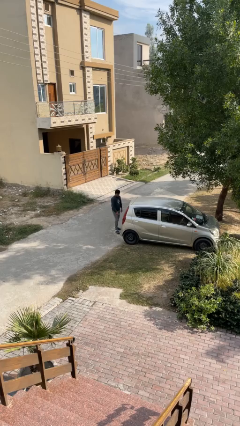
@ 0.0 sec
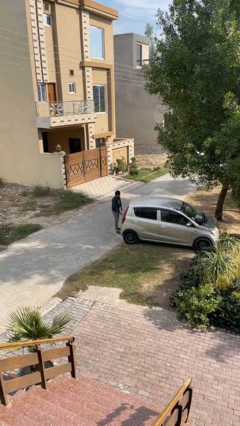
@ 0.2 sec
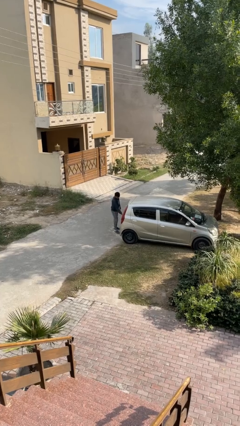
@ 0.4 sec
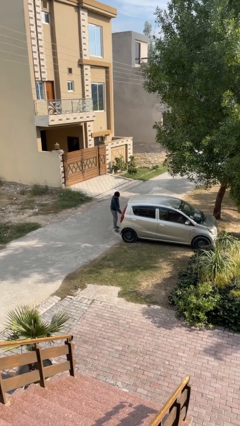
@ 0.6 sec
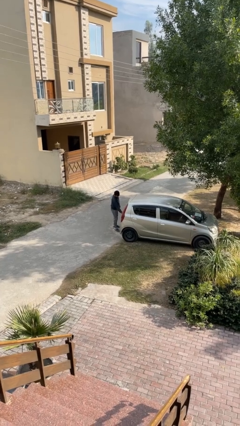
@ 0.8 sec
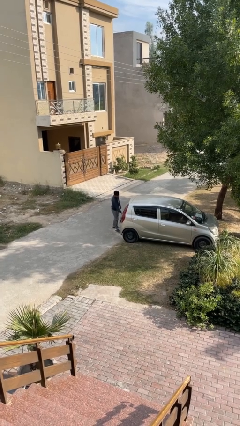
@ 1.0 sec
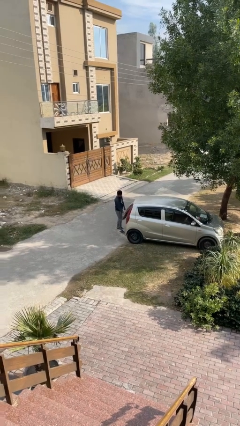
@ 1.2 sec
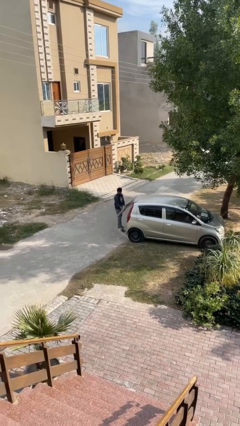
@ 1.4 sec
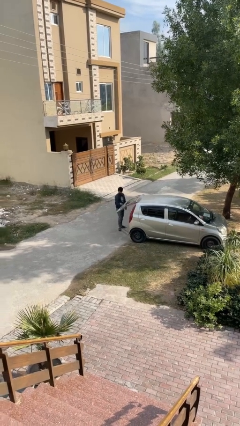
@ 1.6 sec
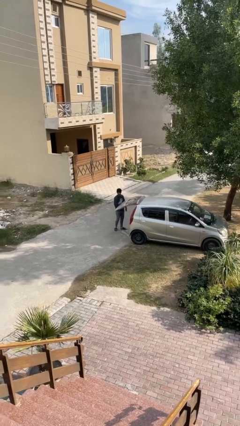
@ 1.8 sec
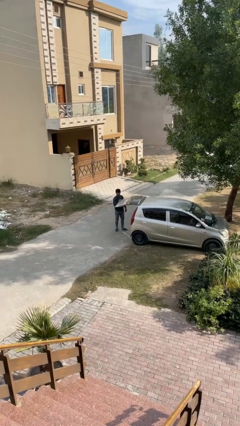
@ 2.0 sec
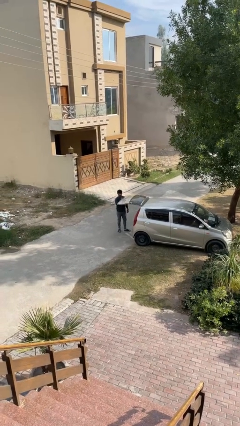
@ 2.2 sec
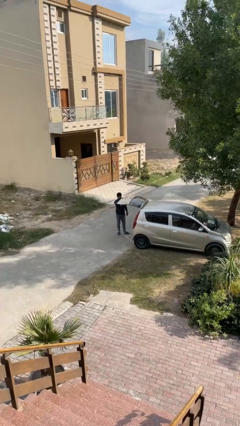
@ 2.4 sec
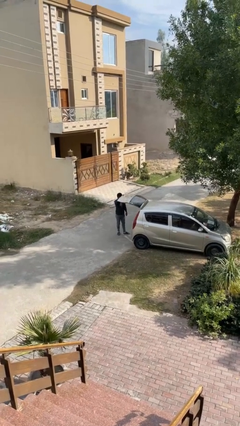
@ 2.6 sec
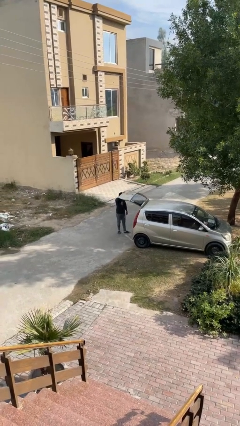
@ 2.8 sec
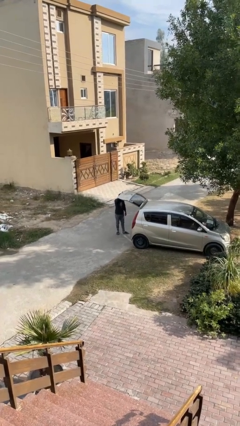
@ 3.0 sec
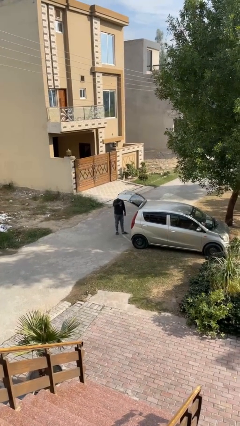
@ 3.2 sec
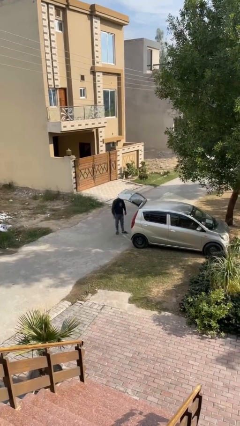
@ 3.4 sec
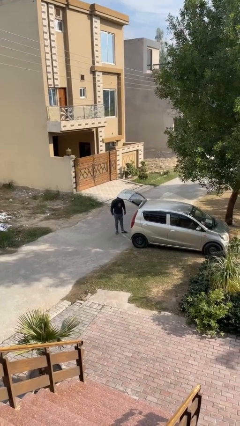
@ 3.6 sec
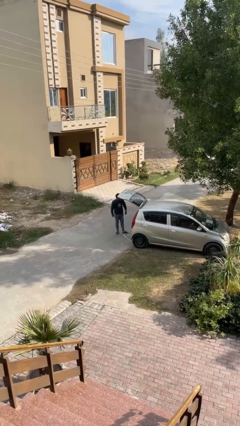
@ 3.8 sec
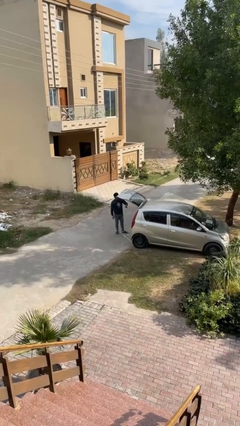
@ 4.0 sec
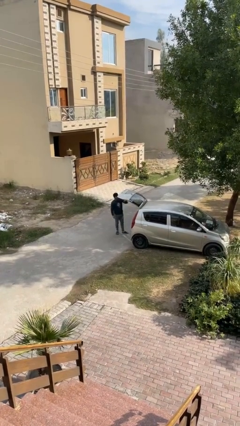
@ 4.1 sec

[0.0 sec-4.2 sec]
person opens car trunk

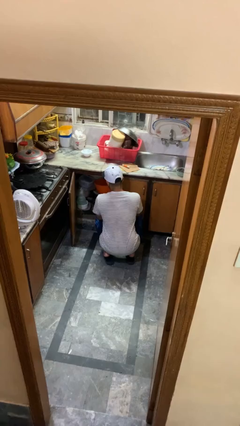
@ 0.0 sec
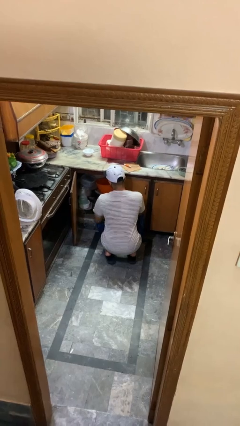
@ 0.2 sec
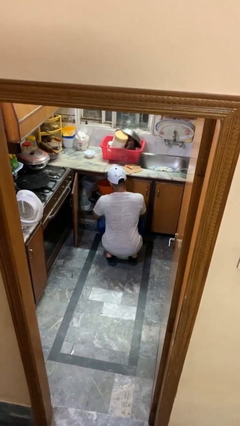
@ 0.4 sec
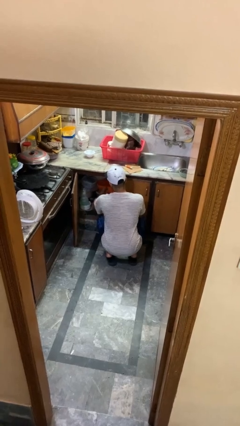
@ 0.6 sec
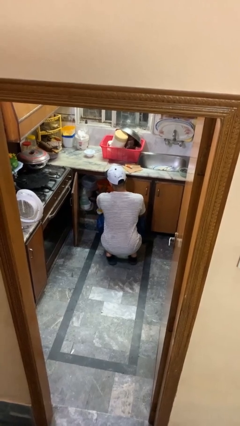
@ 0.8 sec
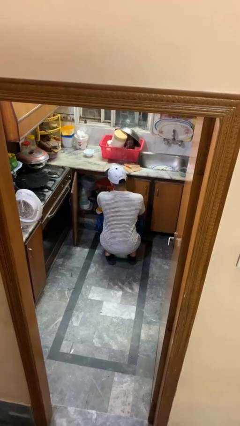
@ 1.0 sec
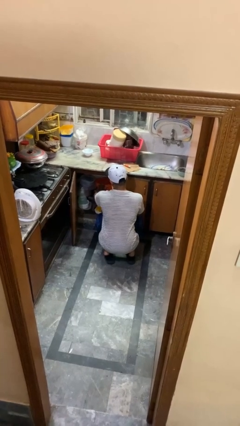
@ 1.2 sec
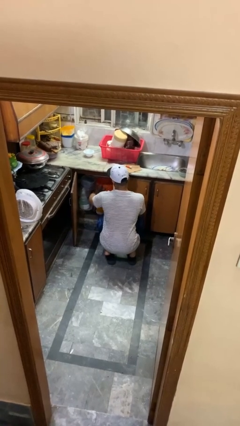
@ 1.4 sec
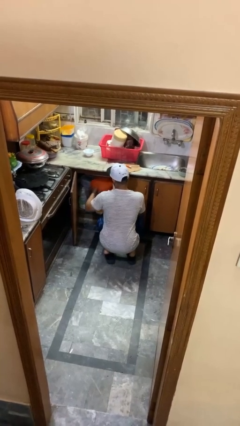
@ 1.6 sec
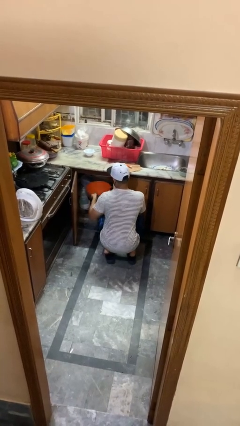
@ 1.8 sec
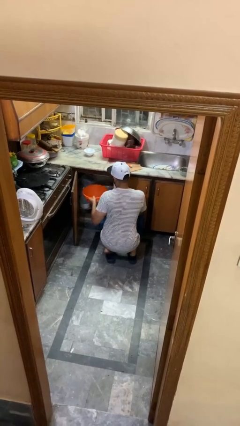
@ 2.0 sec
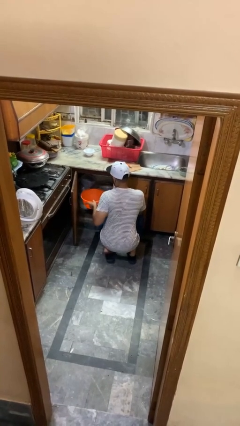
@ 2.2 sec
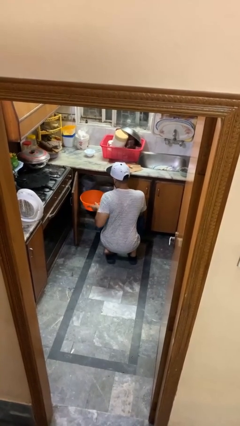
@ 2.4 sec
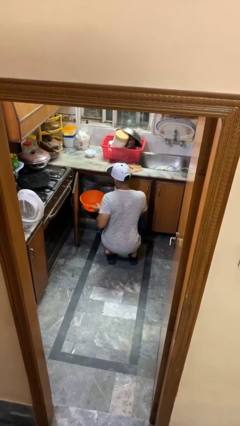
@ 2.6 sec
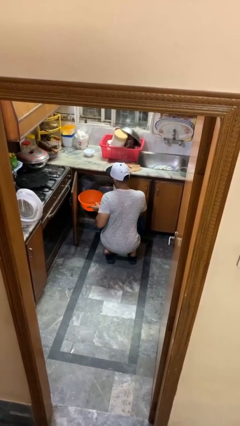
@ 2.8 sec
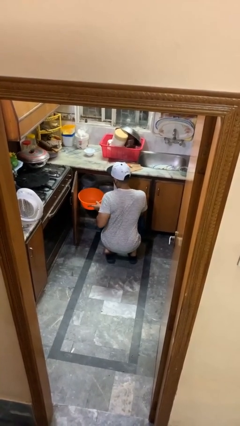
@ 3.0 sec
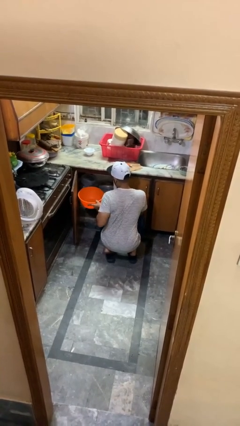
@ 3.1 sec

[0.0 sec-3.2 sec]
person takes object from kitchen drawer

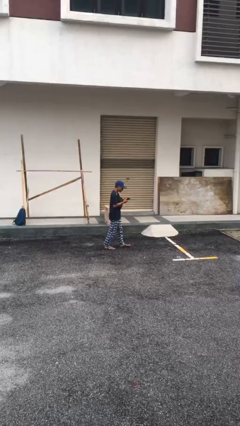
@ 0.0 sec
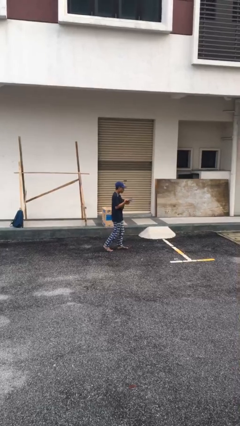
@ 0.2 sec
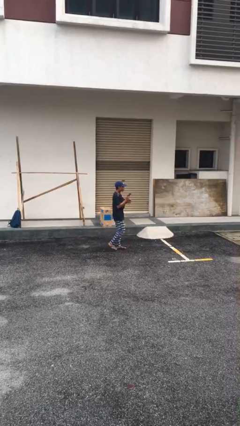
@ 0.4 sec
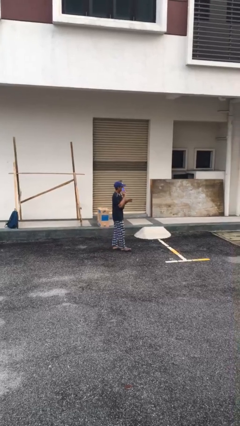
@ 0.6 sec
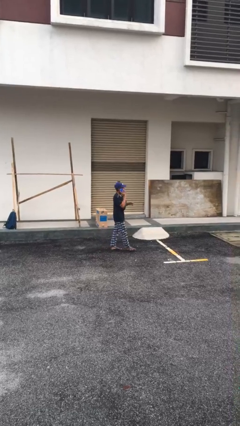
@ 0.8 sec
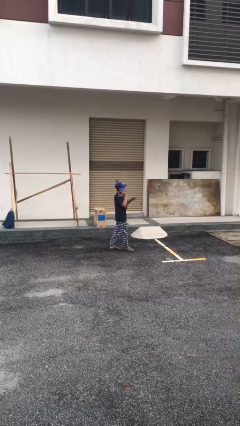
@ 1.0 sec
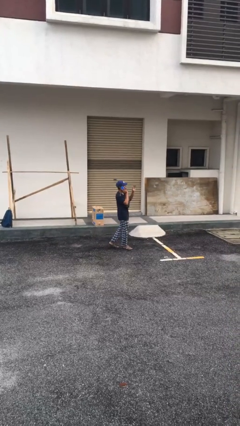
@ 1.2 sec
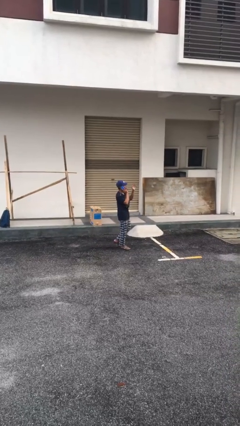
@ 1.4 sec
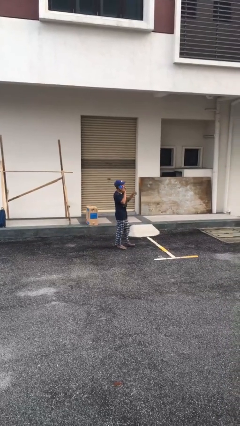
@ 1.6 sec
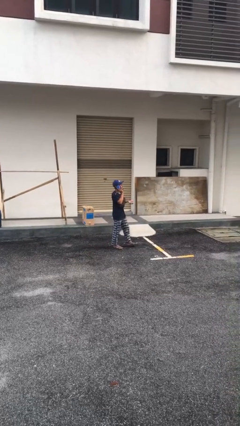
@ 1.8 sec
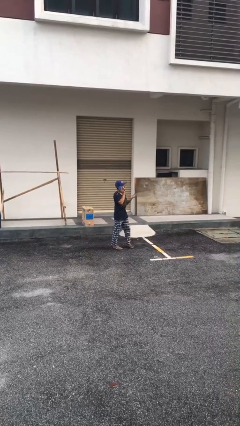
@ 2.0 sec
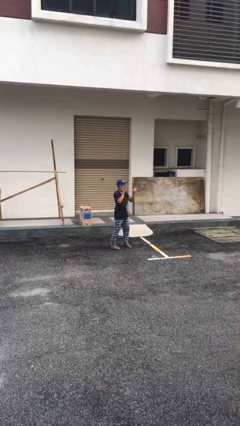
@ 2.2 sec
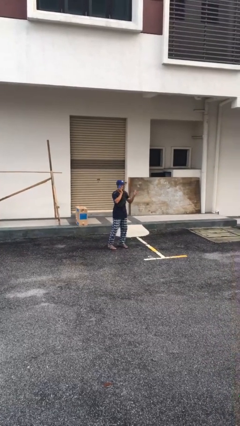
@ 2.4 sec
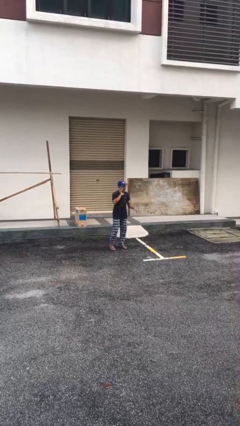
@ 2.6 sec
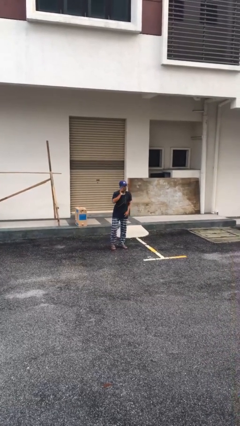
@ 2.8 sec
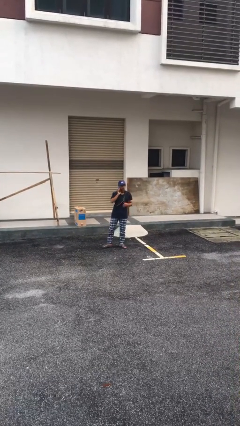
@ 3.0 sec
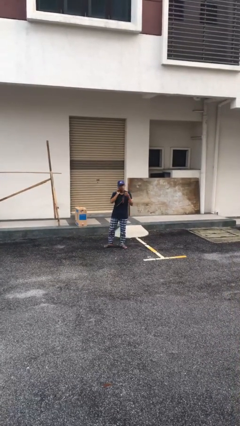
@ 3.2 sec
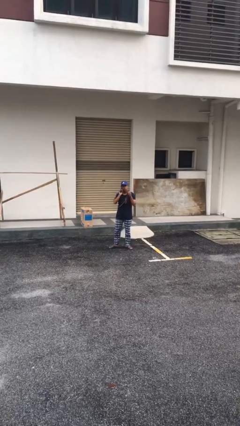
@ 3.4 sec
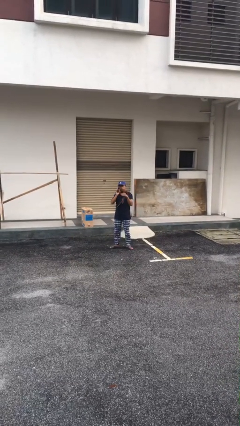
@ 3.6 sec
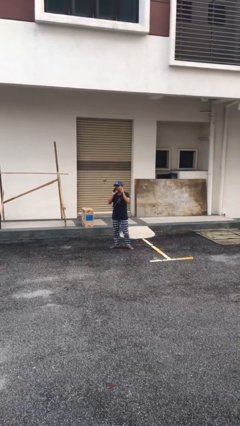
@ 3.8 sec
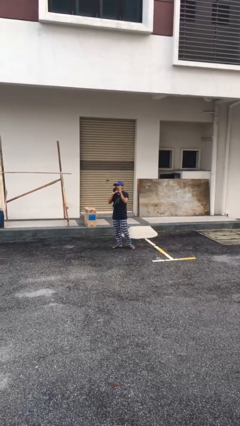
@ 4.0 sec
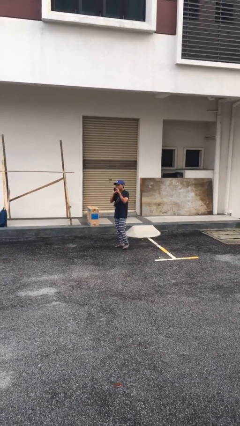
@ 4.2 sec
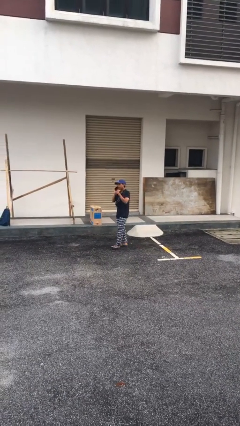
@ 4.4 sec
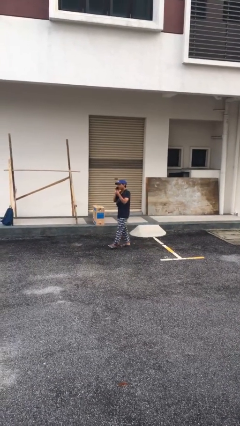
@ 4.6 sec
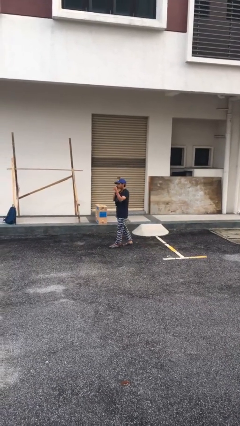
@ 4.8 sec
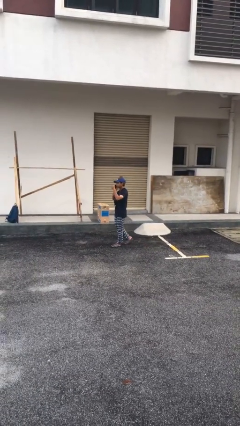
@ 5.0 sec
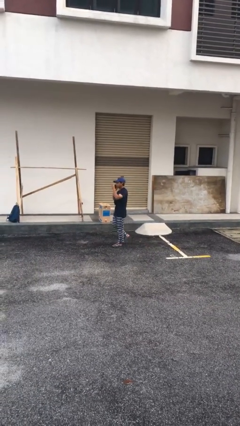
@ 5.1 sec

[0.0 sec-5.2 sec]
person talks on phone

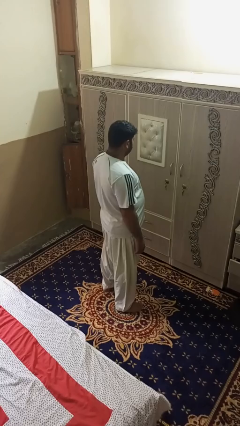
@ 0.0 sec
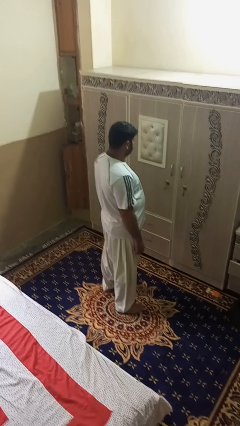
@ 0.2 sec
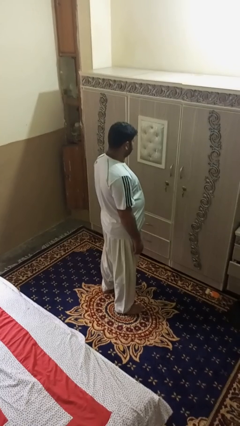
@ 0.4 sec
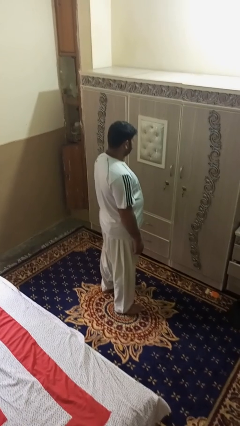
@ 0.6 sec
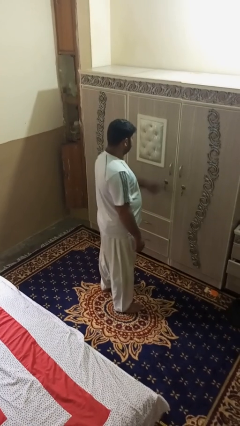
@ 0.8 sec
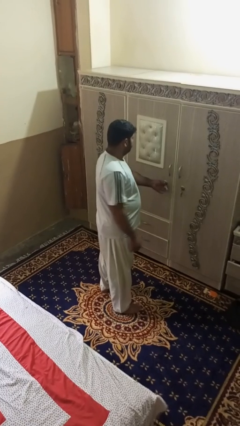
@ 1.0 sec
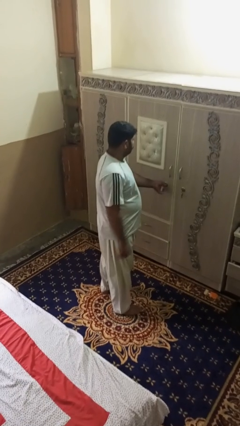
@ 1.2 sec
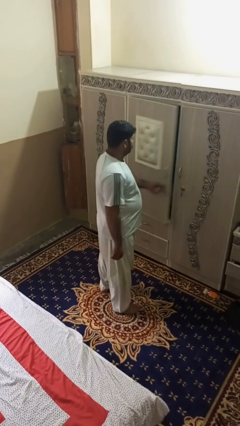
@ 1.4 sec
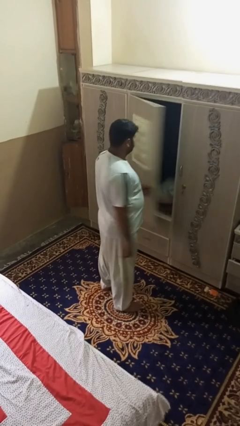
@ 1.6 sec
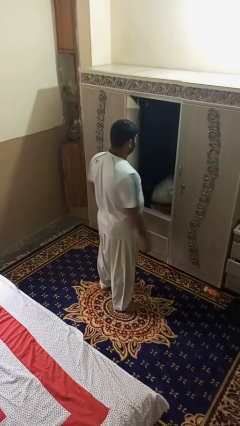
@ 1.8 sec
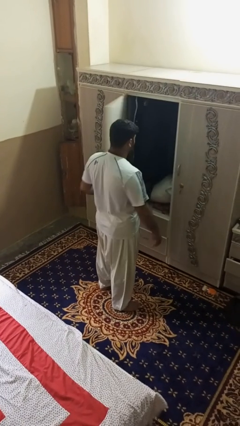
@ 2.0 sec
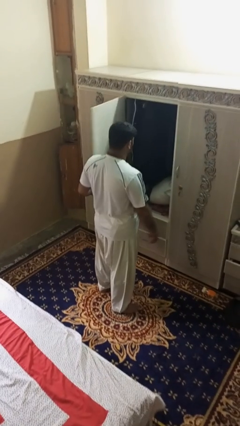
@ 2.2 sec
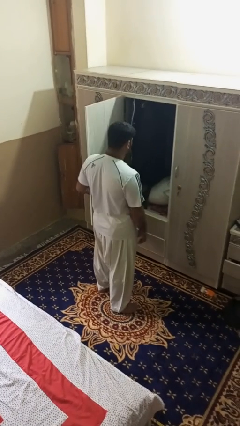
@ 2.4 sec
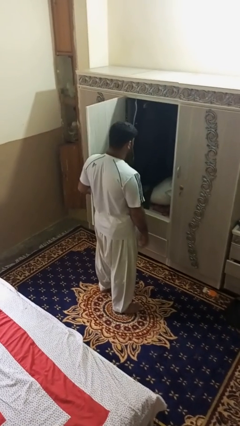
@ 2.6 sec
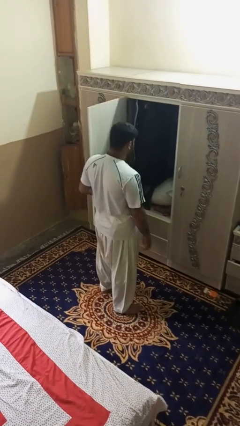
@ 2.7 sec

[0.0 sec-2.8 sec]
person opens dresser drawer

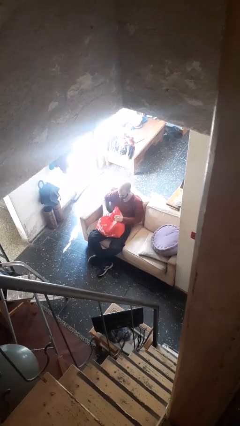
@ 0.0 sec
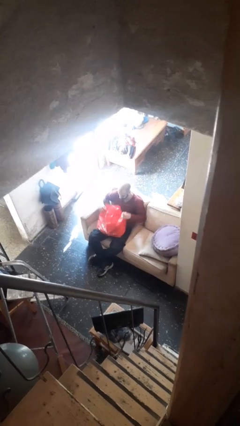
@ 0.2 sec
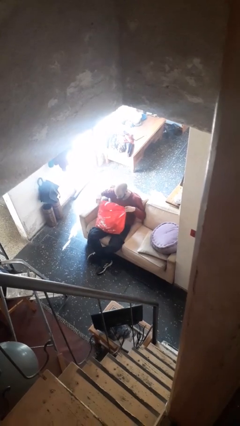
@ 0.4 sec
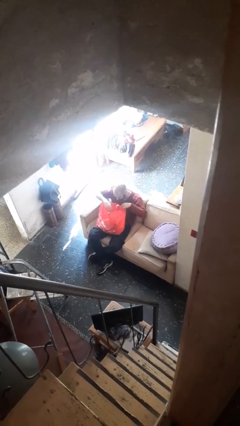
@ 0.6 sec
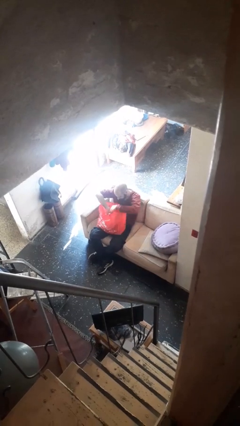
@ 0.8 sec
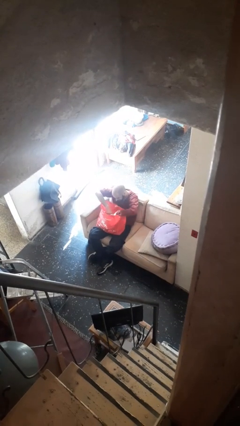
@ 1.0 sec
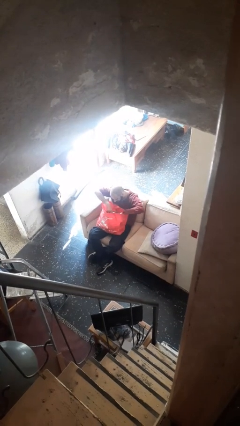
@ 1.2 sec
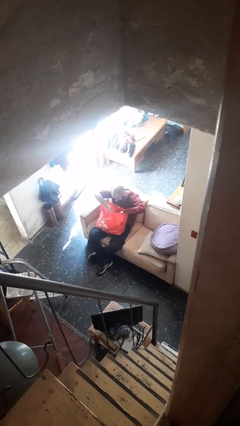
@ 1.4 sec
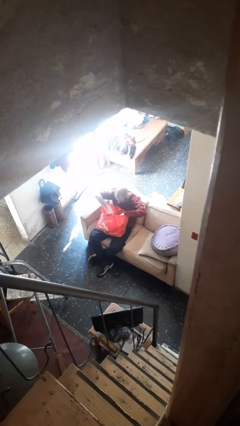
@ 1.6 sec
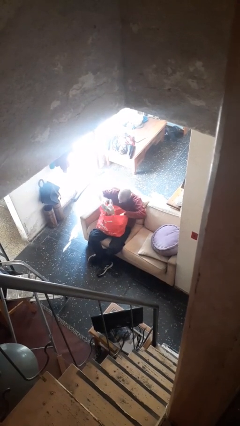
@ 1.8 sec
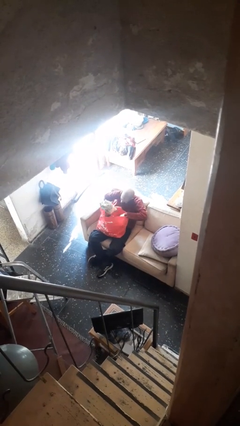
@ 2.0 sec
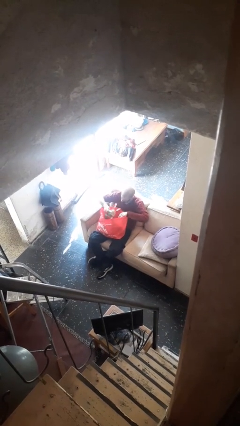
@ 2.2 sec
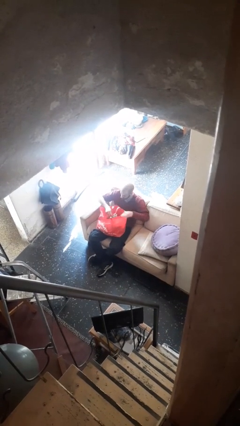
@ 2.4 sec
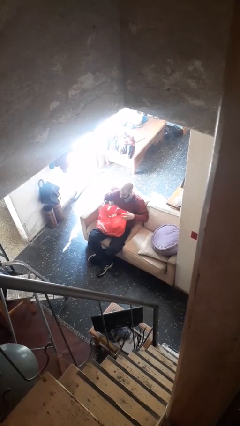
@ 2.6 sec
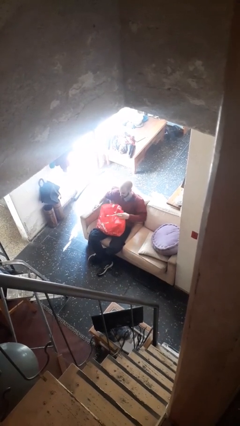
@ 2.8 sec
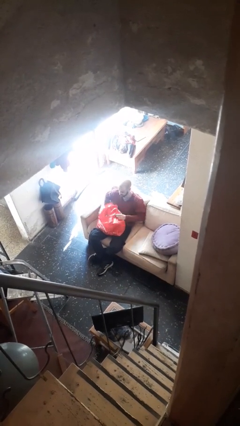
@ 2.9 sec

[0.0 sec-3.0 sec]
person searches in bag
